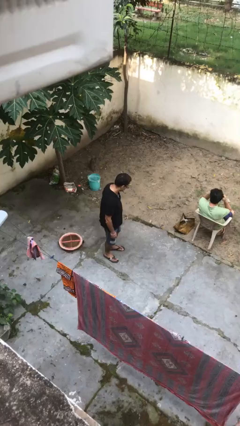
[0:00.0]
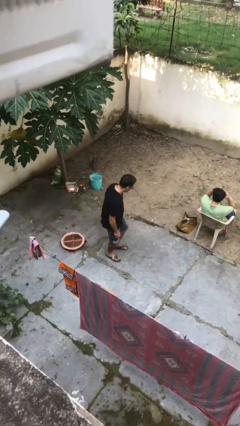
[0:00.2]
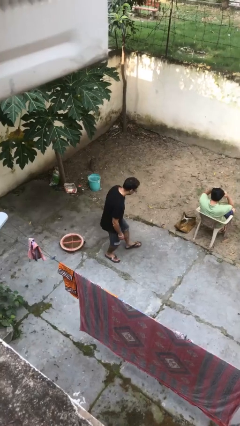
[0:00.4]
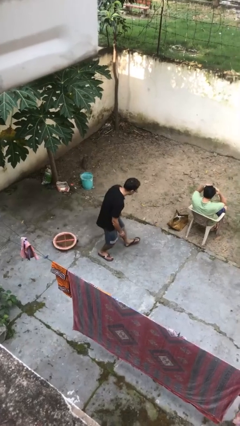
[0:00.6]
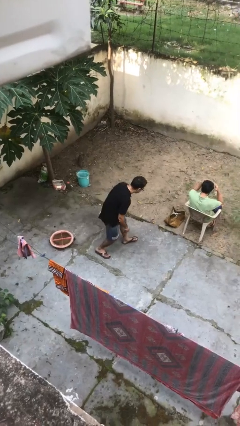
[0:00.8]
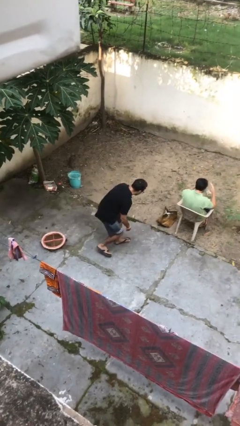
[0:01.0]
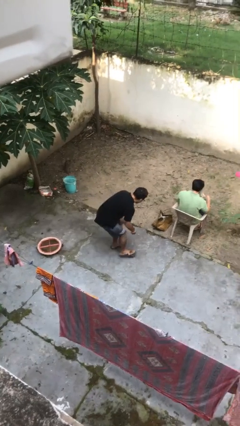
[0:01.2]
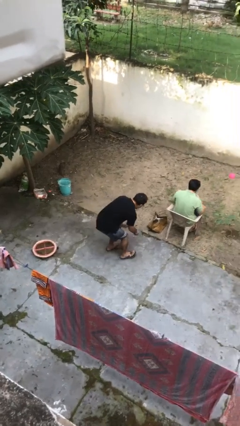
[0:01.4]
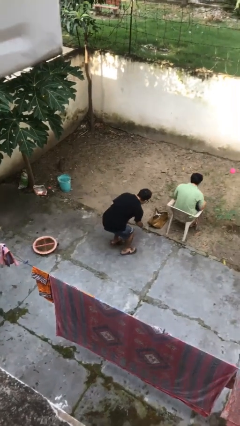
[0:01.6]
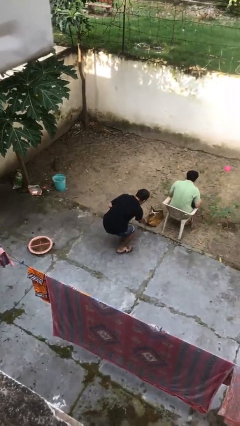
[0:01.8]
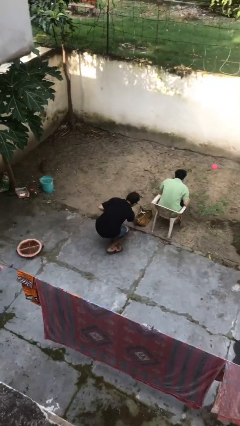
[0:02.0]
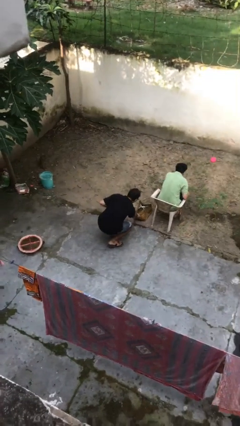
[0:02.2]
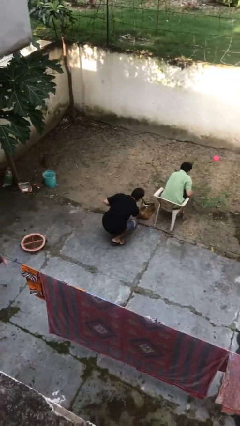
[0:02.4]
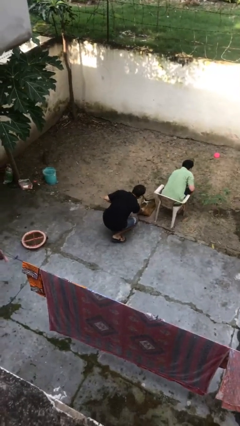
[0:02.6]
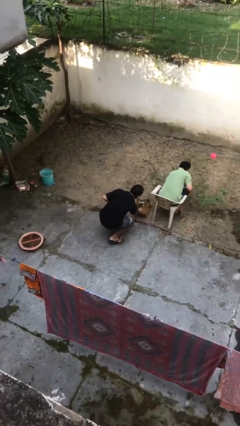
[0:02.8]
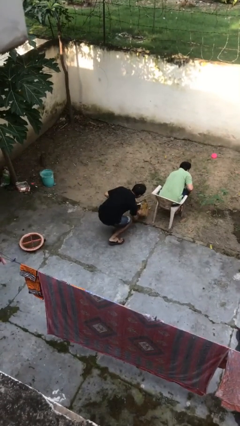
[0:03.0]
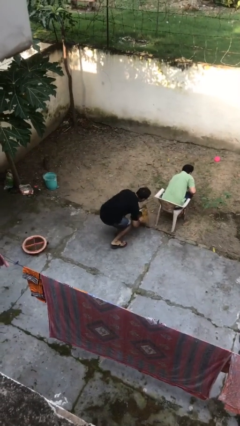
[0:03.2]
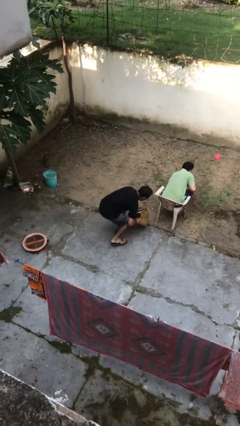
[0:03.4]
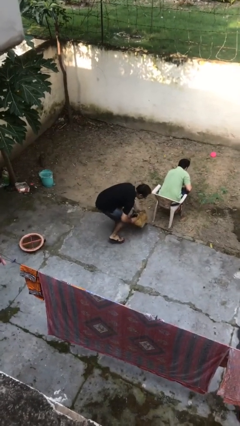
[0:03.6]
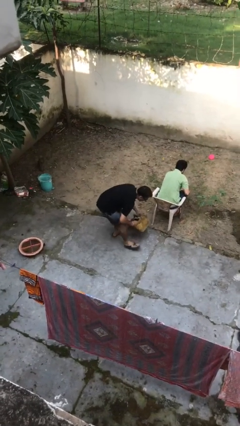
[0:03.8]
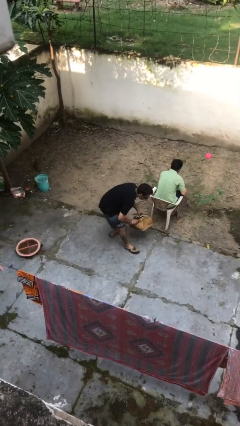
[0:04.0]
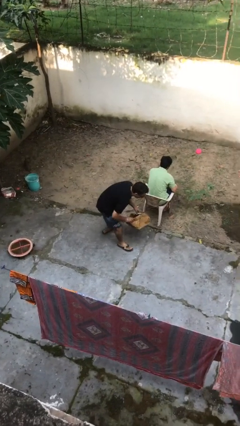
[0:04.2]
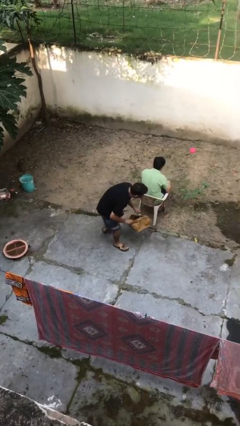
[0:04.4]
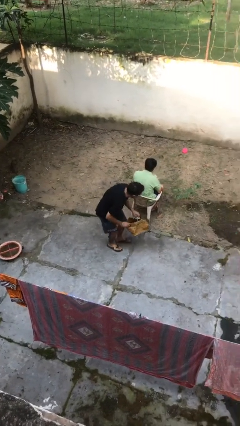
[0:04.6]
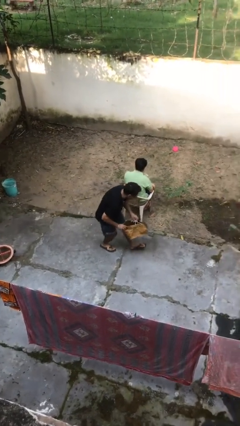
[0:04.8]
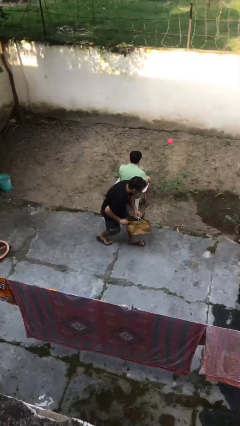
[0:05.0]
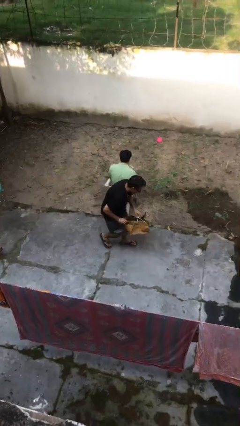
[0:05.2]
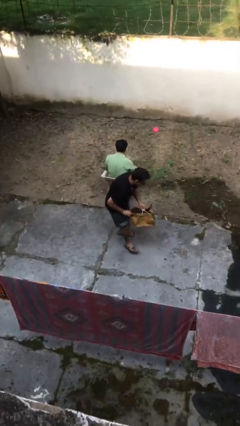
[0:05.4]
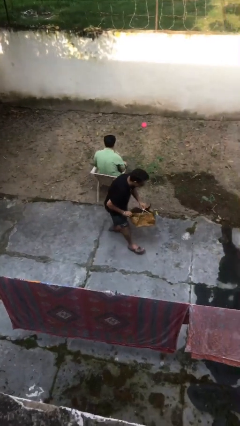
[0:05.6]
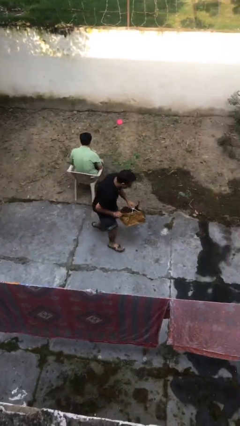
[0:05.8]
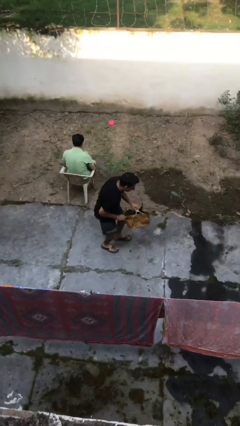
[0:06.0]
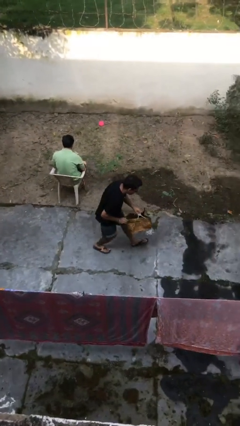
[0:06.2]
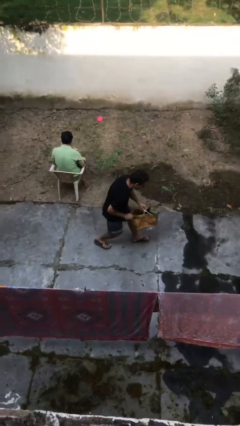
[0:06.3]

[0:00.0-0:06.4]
person steals object from person

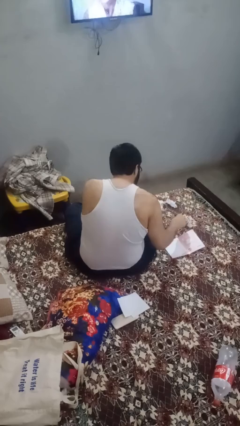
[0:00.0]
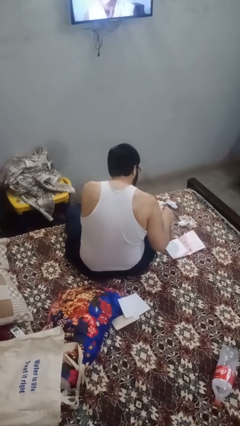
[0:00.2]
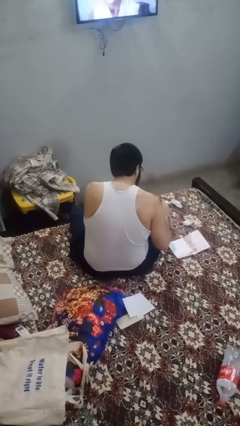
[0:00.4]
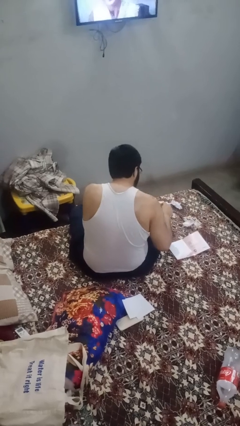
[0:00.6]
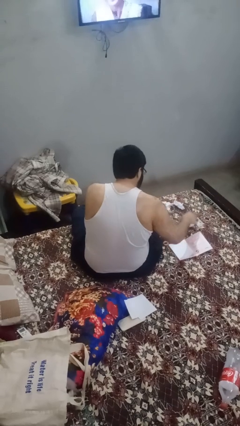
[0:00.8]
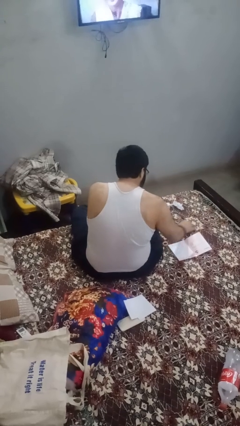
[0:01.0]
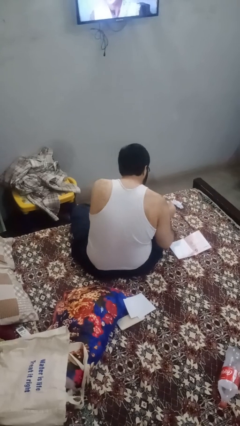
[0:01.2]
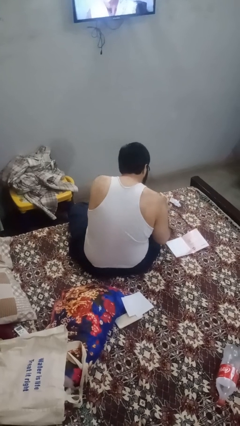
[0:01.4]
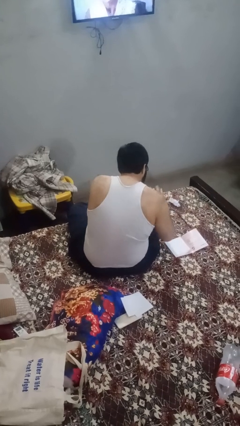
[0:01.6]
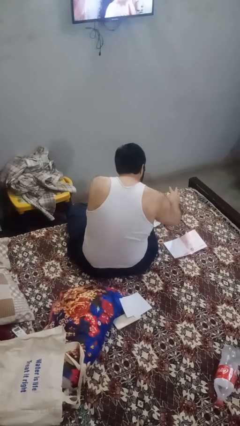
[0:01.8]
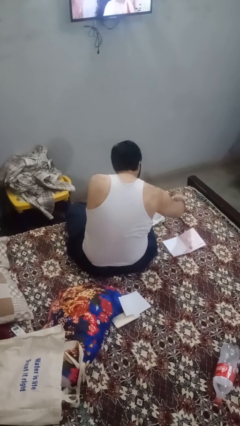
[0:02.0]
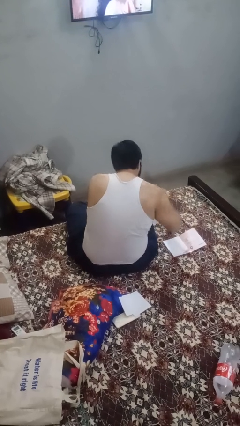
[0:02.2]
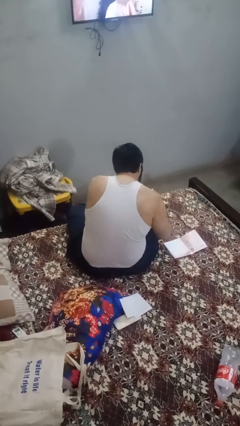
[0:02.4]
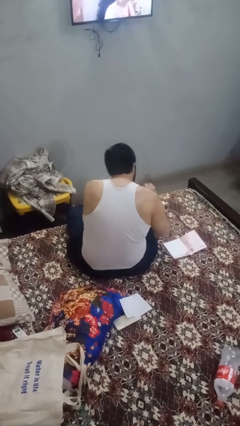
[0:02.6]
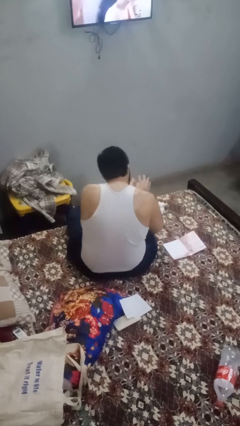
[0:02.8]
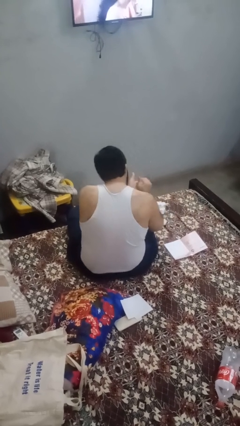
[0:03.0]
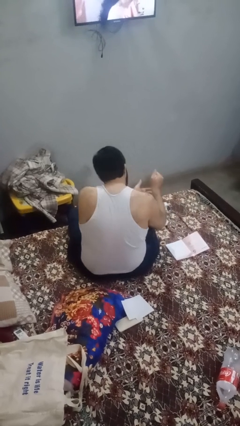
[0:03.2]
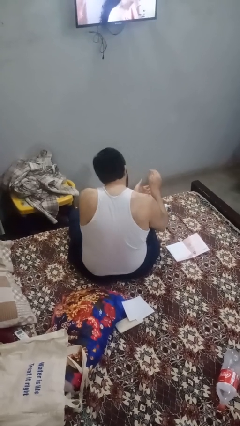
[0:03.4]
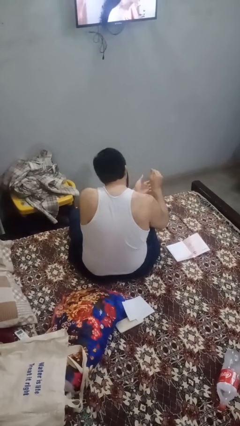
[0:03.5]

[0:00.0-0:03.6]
person crumples paper

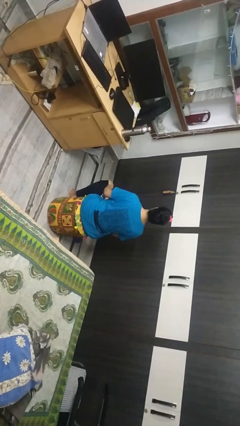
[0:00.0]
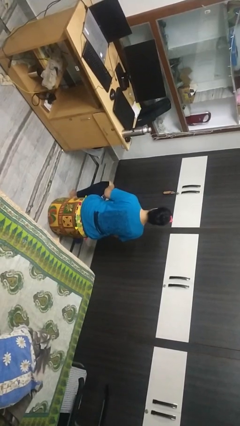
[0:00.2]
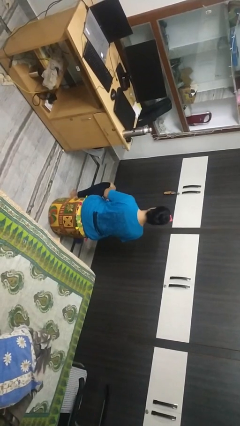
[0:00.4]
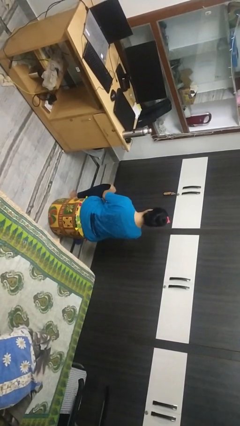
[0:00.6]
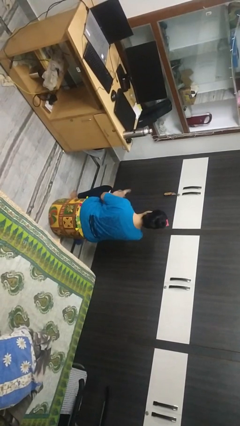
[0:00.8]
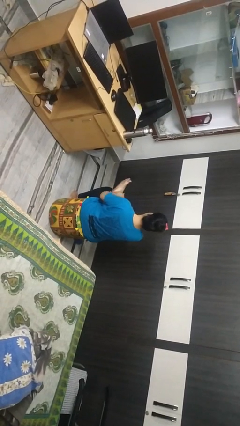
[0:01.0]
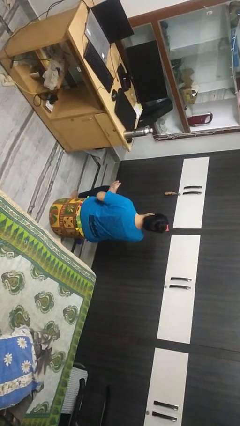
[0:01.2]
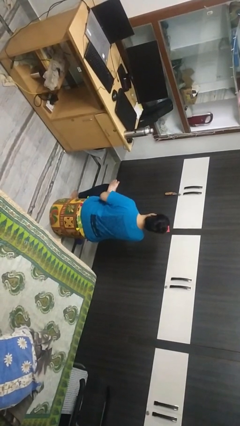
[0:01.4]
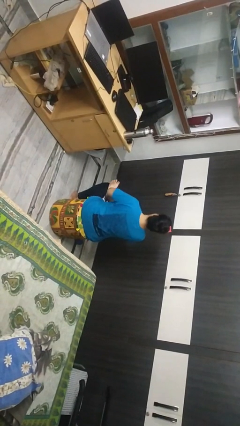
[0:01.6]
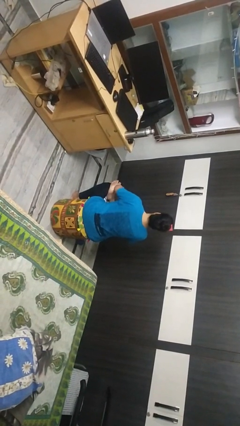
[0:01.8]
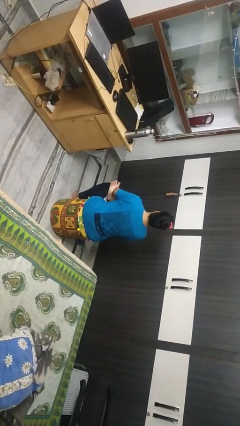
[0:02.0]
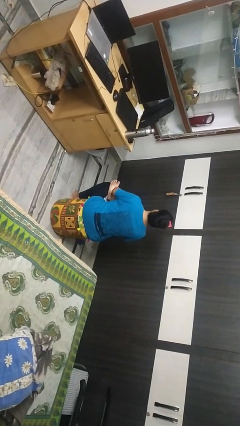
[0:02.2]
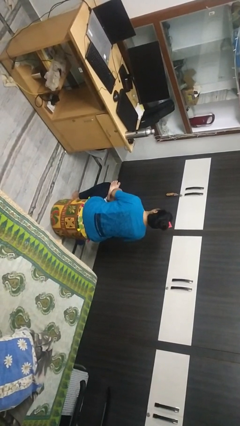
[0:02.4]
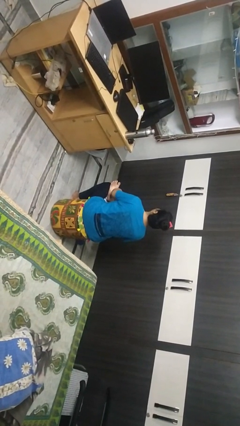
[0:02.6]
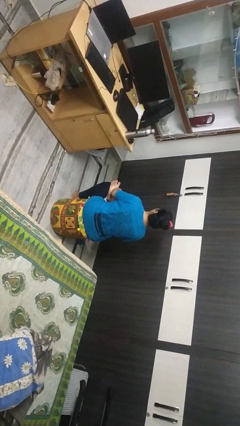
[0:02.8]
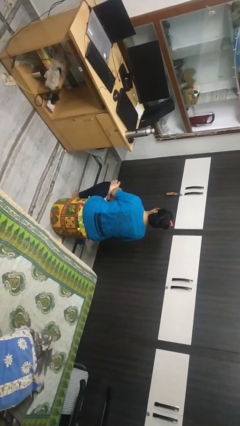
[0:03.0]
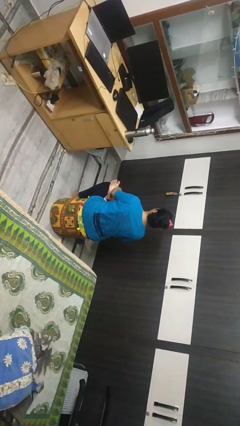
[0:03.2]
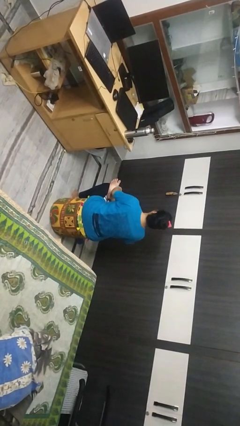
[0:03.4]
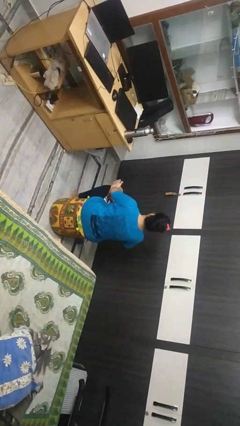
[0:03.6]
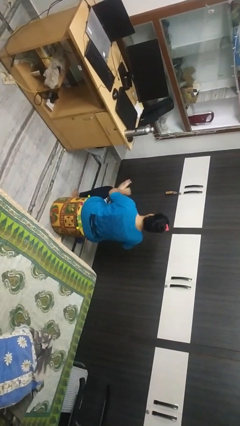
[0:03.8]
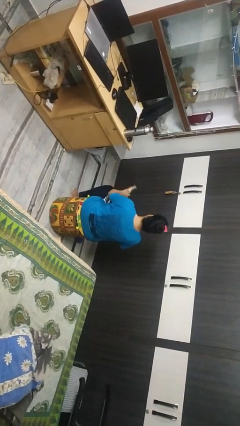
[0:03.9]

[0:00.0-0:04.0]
person crosses legs

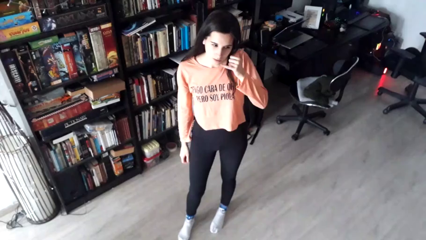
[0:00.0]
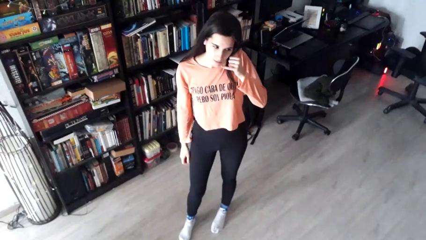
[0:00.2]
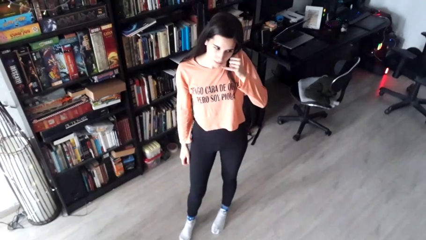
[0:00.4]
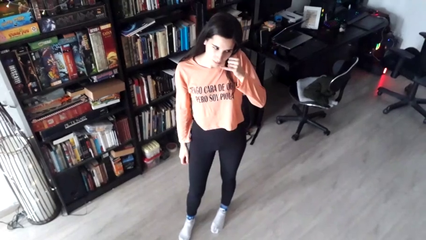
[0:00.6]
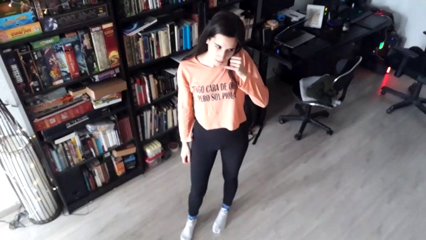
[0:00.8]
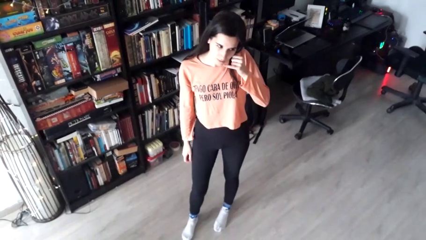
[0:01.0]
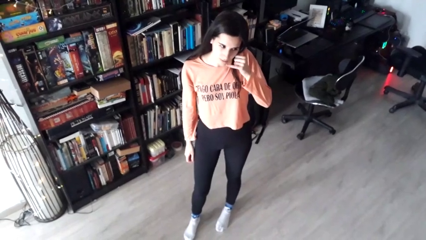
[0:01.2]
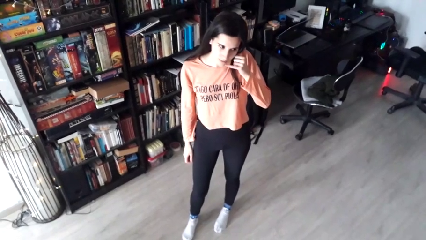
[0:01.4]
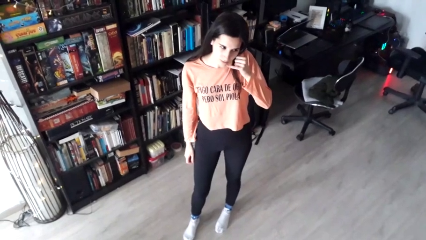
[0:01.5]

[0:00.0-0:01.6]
person gestures call me

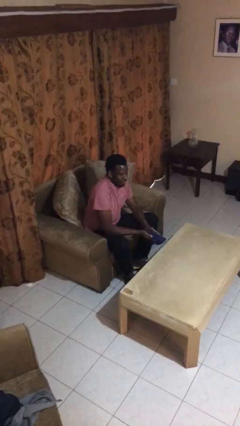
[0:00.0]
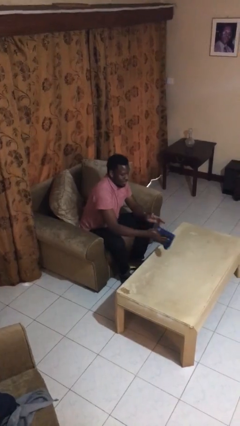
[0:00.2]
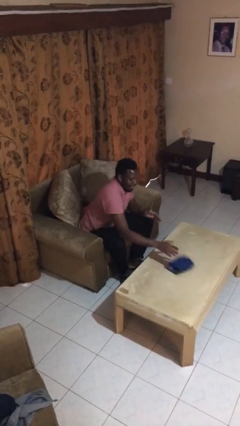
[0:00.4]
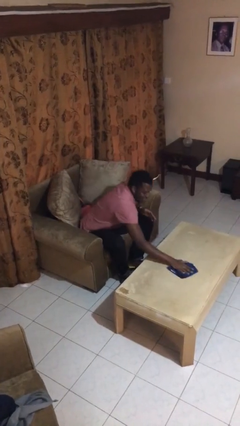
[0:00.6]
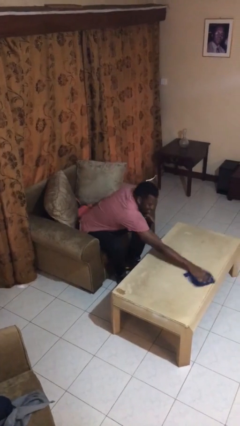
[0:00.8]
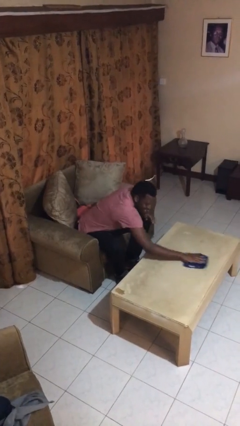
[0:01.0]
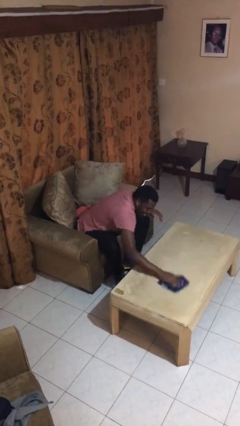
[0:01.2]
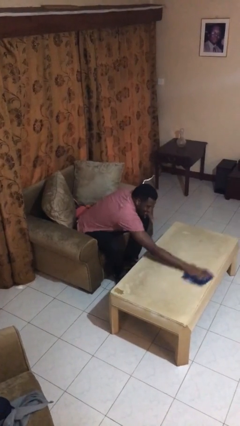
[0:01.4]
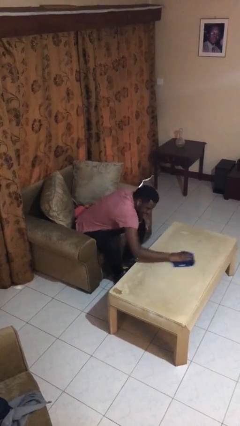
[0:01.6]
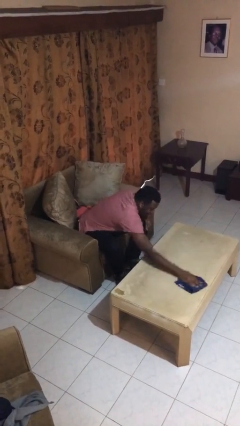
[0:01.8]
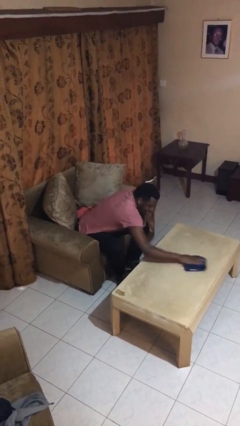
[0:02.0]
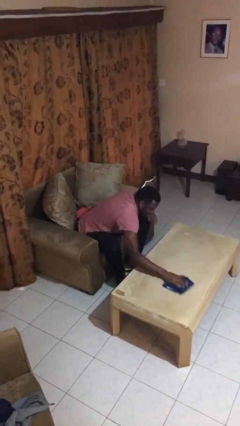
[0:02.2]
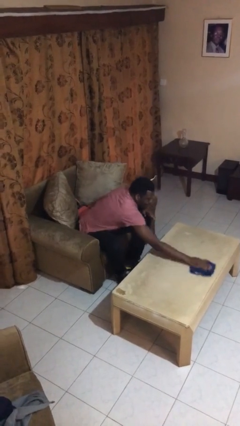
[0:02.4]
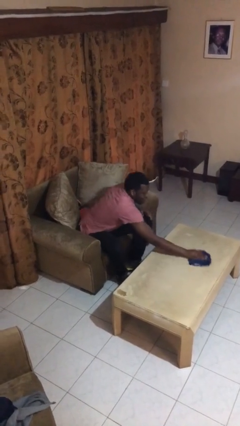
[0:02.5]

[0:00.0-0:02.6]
person cleans table with rag
